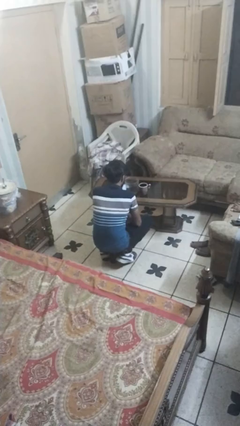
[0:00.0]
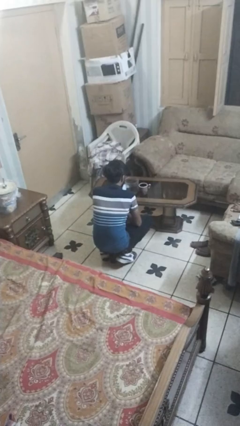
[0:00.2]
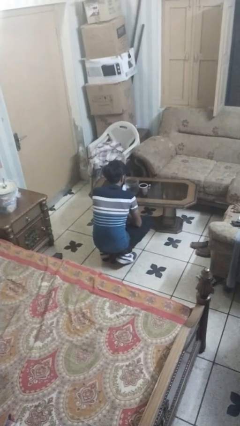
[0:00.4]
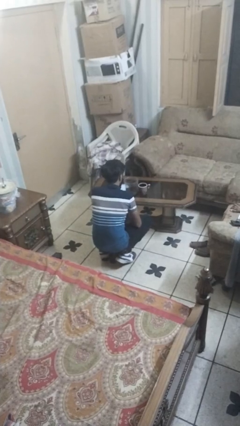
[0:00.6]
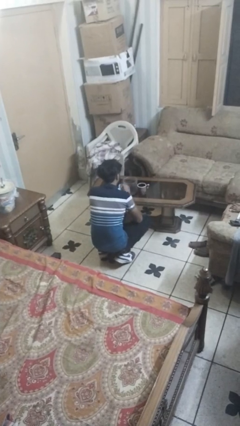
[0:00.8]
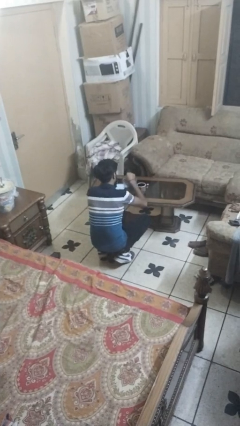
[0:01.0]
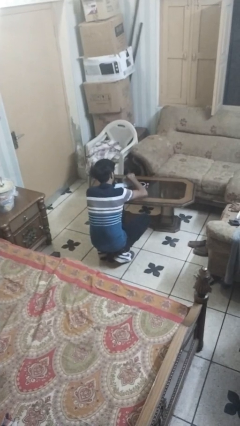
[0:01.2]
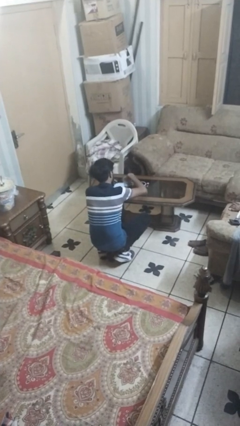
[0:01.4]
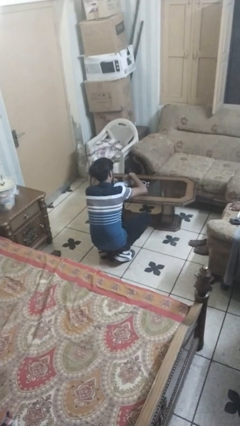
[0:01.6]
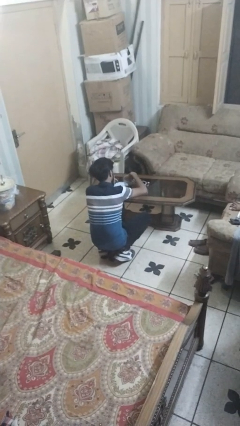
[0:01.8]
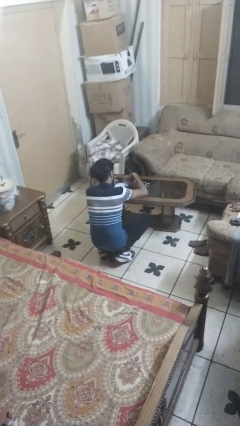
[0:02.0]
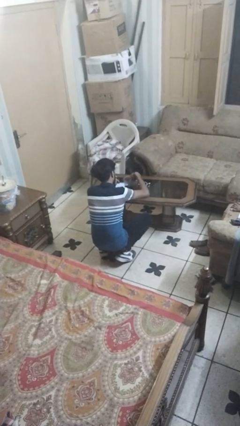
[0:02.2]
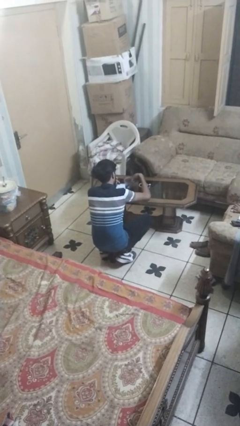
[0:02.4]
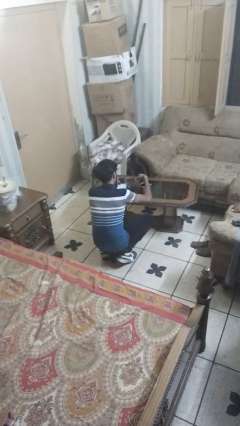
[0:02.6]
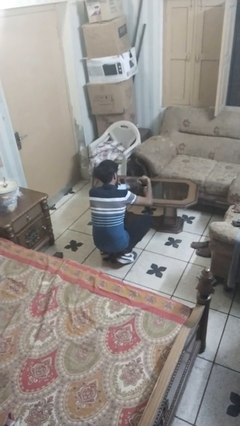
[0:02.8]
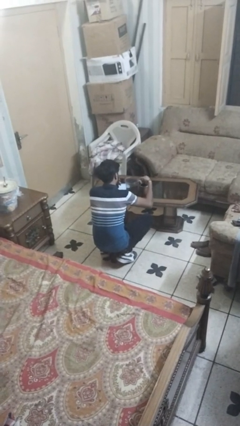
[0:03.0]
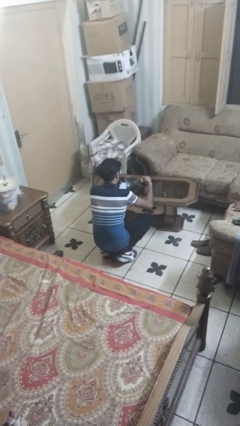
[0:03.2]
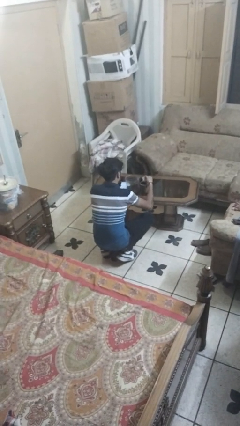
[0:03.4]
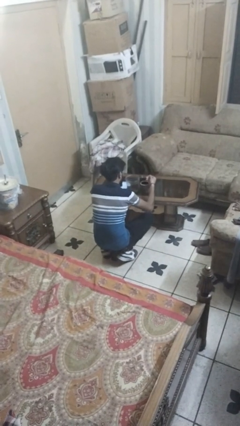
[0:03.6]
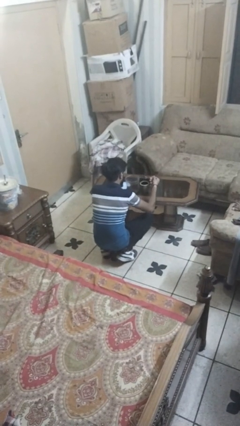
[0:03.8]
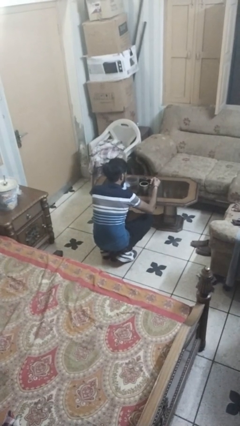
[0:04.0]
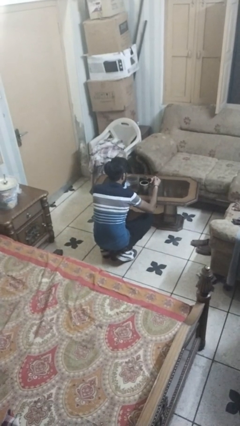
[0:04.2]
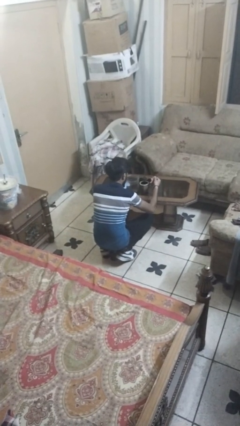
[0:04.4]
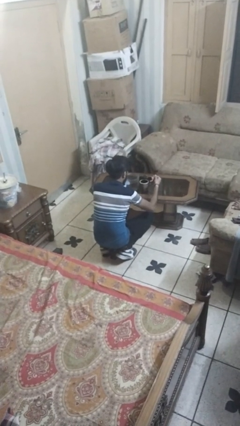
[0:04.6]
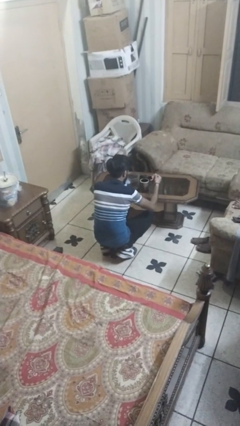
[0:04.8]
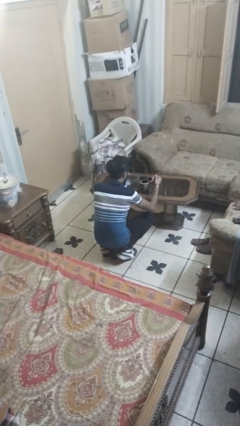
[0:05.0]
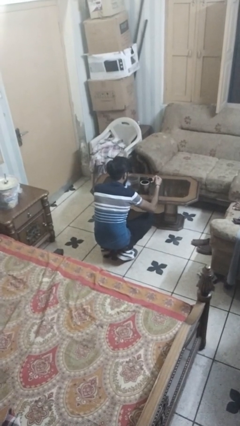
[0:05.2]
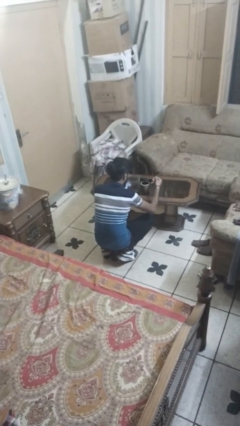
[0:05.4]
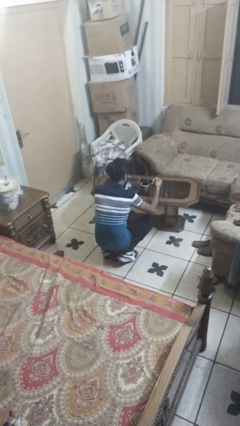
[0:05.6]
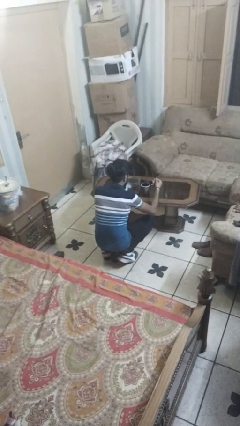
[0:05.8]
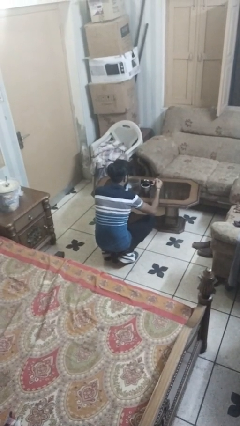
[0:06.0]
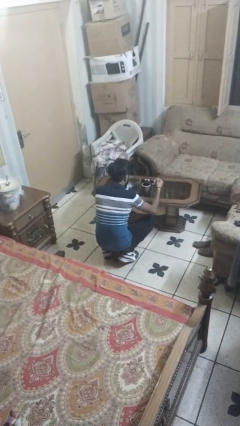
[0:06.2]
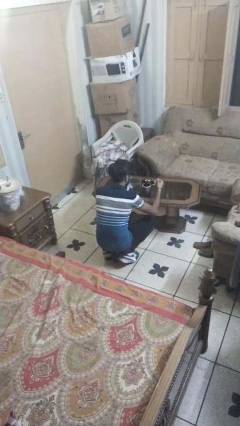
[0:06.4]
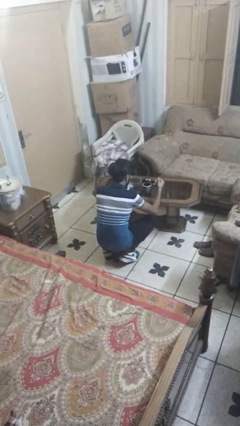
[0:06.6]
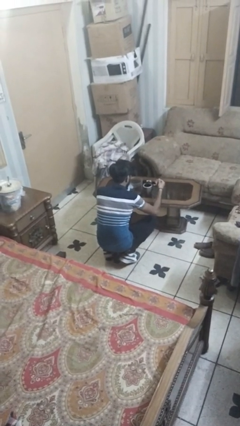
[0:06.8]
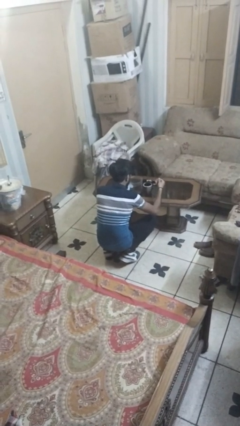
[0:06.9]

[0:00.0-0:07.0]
person pours coffee into mug

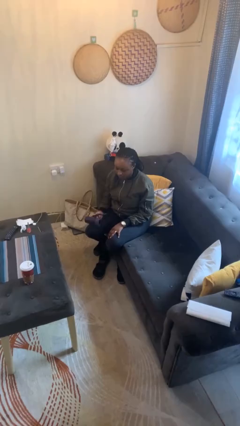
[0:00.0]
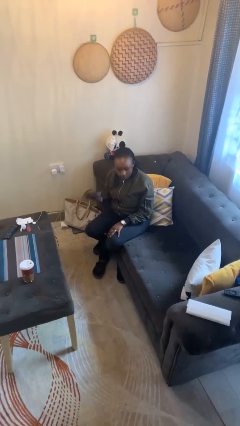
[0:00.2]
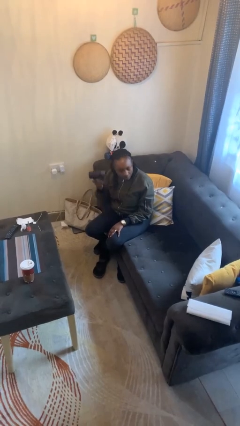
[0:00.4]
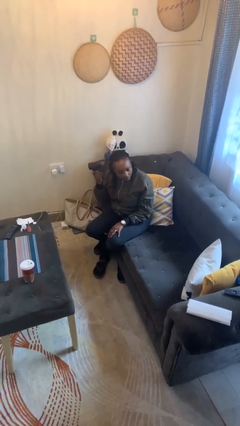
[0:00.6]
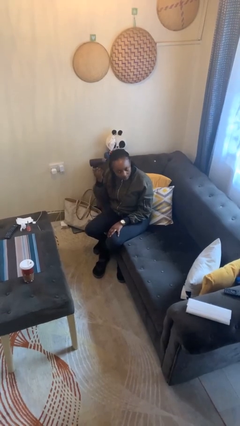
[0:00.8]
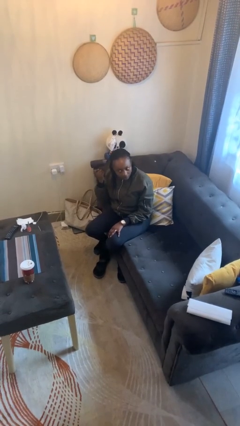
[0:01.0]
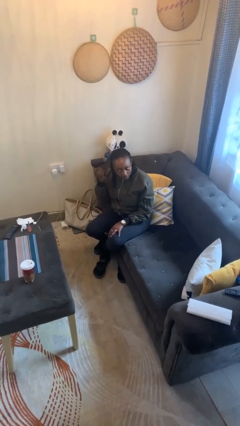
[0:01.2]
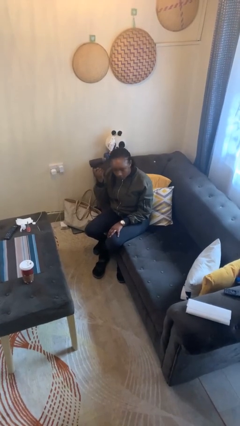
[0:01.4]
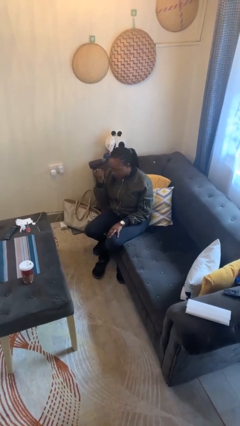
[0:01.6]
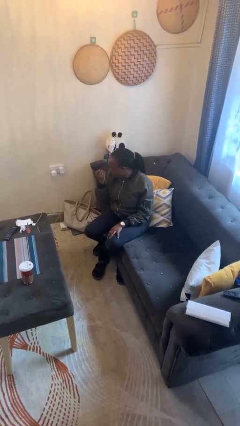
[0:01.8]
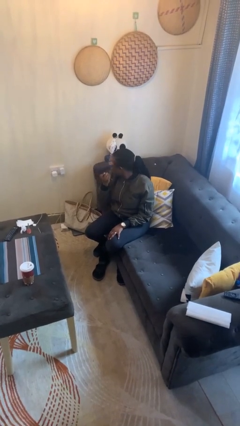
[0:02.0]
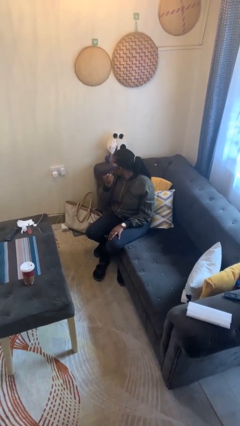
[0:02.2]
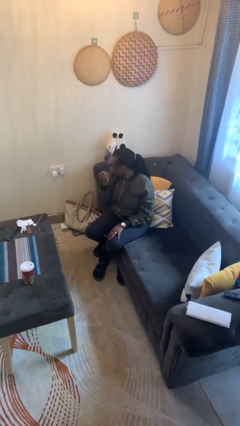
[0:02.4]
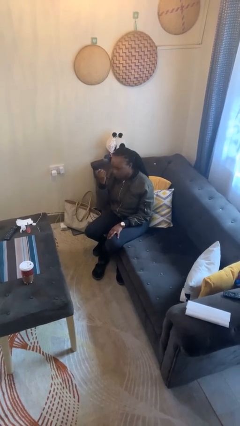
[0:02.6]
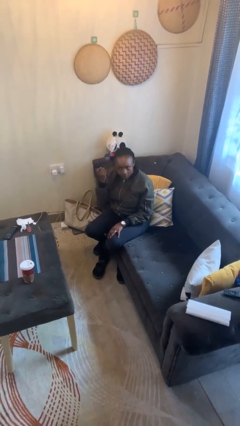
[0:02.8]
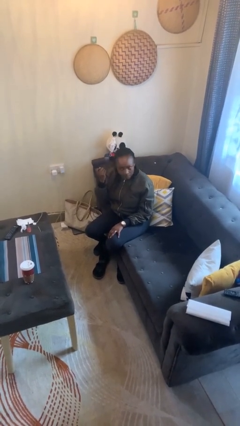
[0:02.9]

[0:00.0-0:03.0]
person dries hair with hairdryer

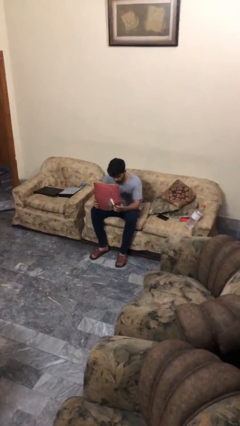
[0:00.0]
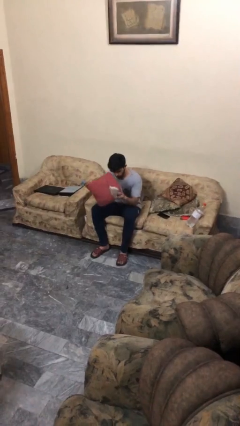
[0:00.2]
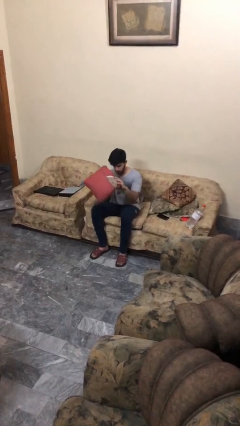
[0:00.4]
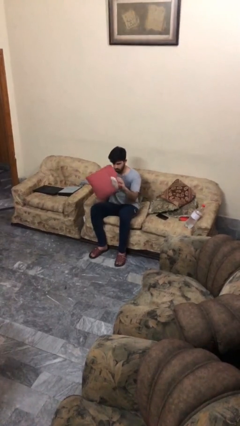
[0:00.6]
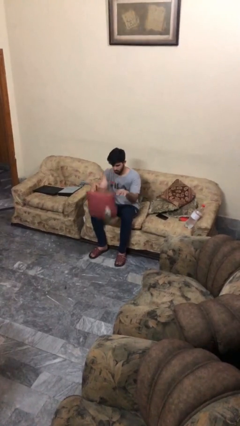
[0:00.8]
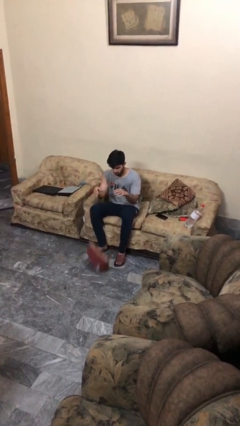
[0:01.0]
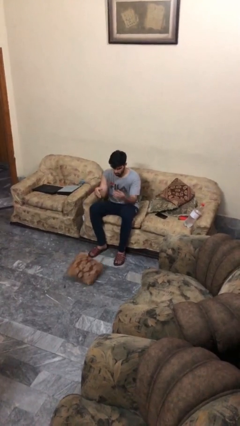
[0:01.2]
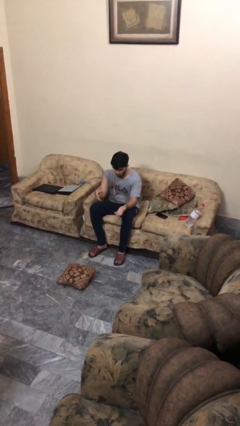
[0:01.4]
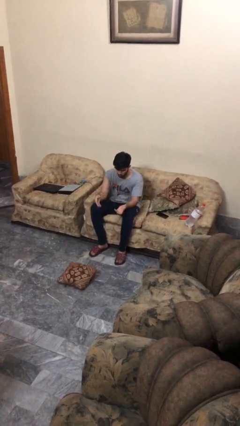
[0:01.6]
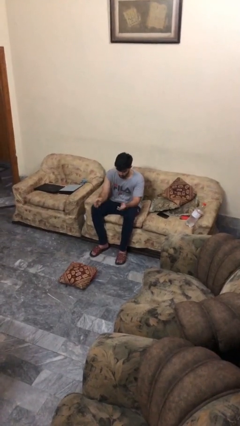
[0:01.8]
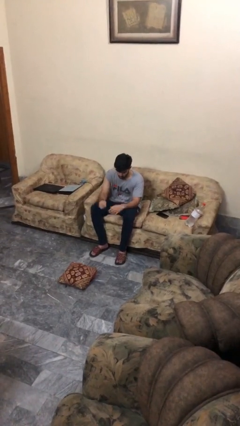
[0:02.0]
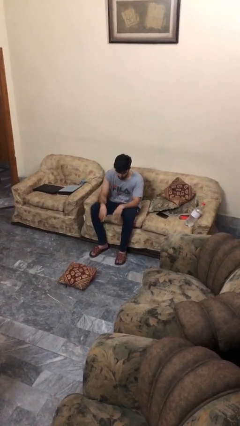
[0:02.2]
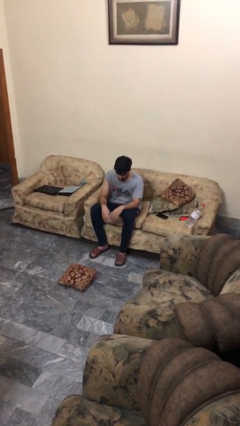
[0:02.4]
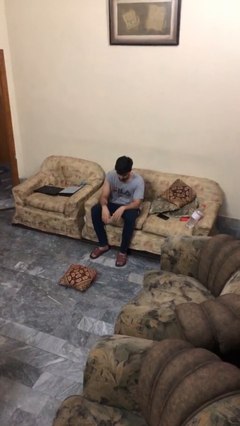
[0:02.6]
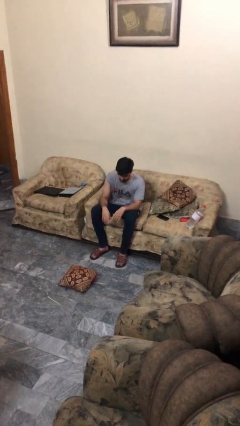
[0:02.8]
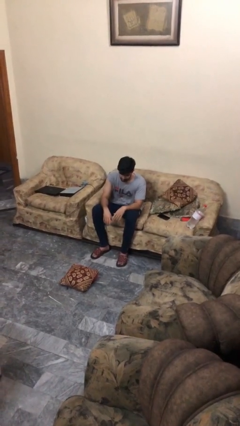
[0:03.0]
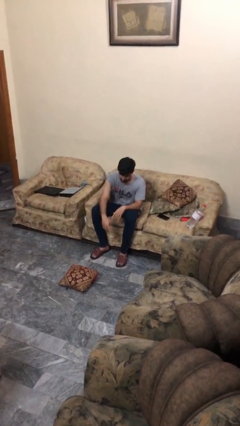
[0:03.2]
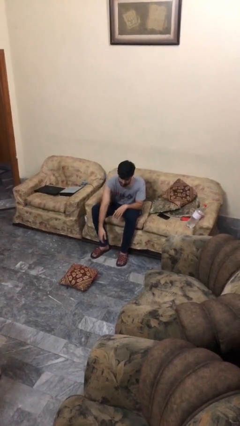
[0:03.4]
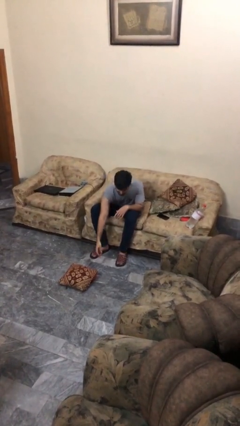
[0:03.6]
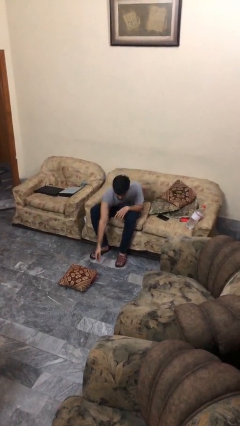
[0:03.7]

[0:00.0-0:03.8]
person drops object

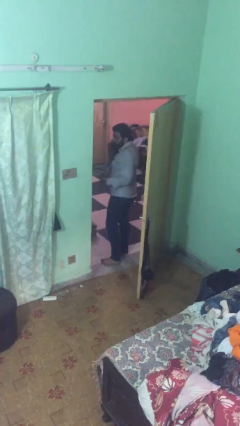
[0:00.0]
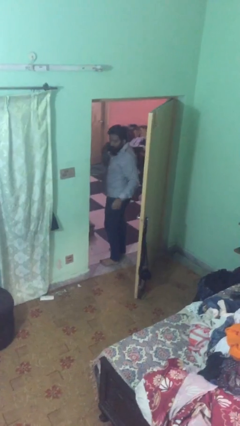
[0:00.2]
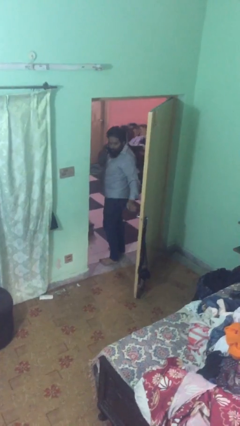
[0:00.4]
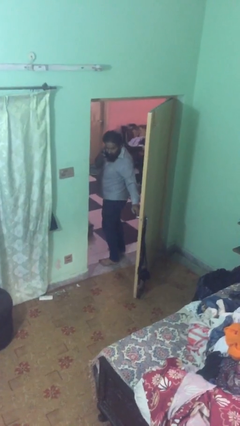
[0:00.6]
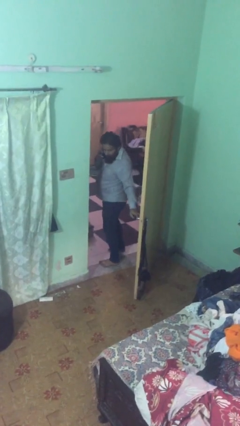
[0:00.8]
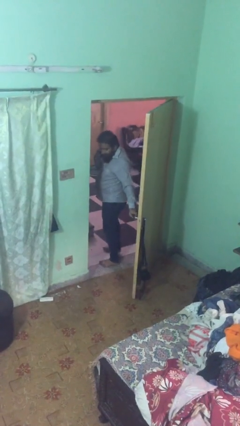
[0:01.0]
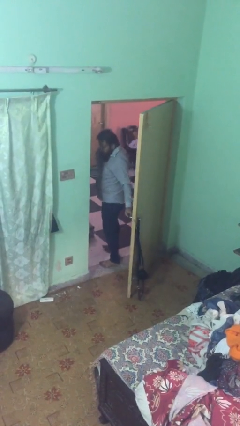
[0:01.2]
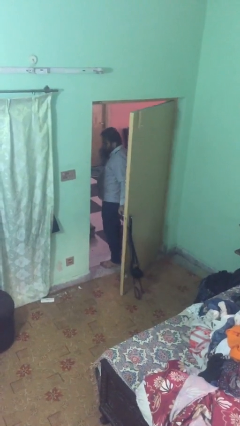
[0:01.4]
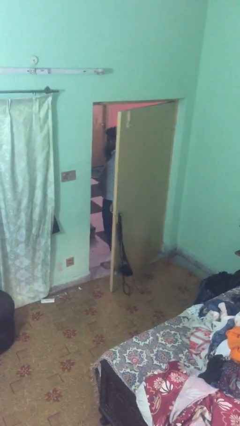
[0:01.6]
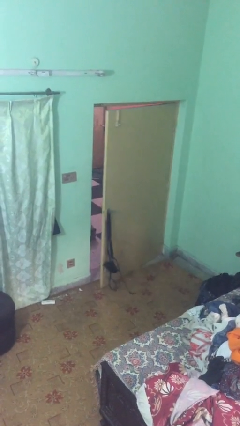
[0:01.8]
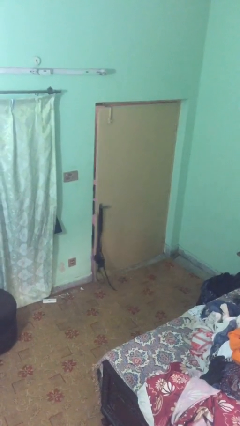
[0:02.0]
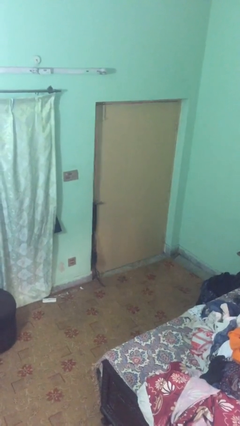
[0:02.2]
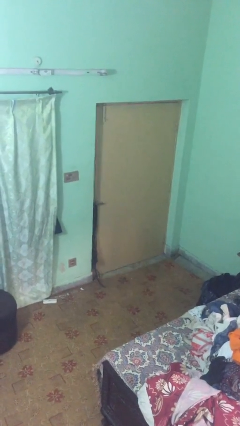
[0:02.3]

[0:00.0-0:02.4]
person closes facility door

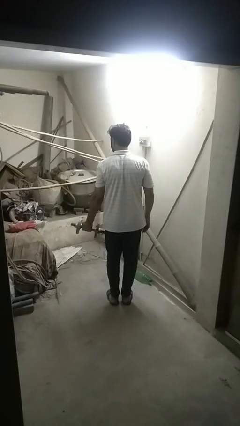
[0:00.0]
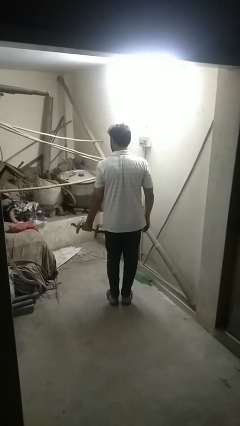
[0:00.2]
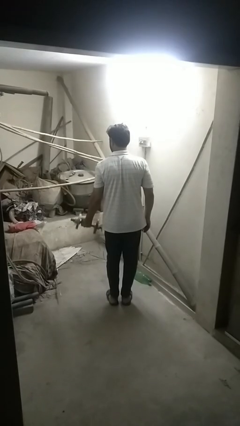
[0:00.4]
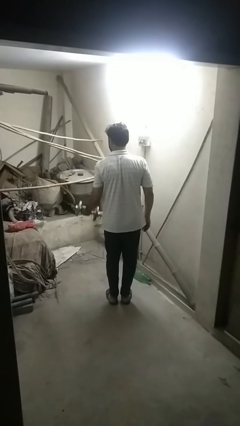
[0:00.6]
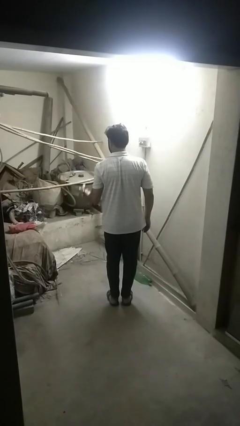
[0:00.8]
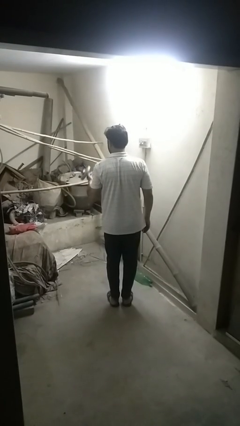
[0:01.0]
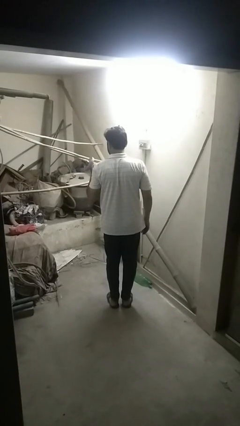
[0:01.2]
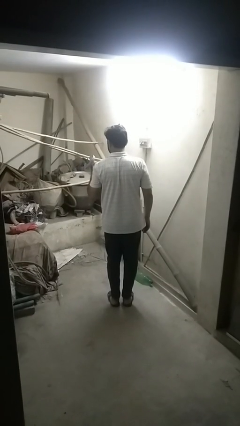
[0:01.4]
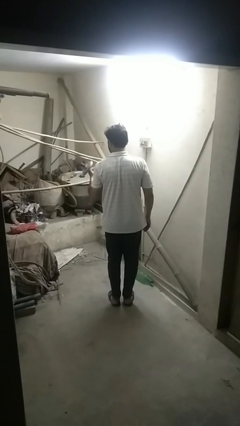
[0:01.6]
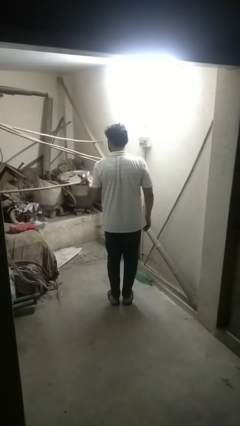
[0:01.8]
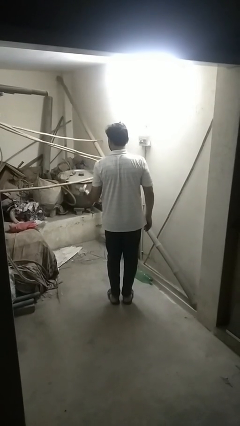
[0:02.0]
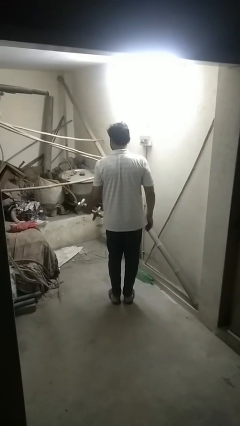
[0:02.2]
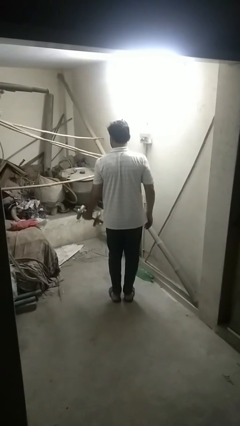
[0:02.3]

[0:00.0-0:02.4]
person lifts dumbbells
